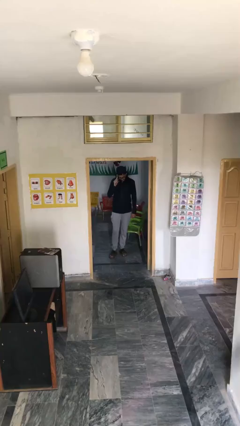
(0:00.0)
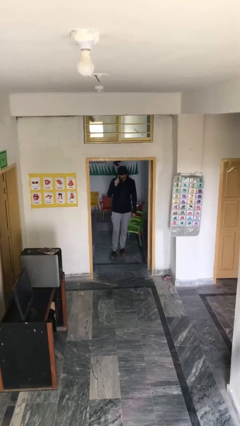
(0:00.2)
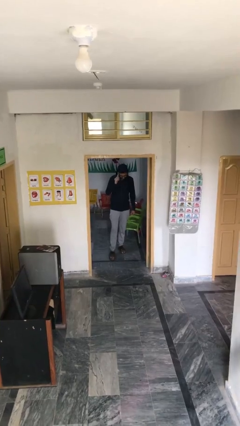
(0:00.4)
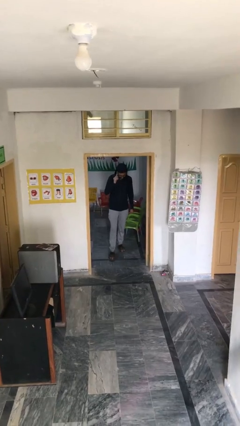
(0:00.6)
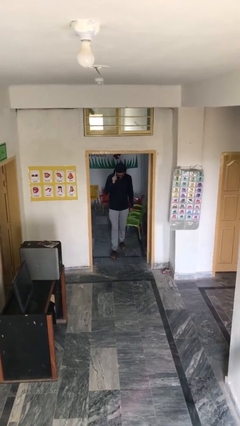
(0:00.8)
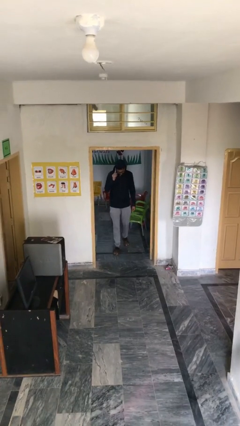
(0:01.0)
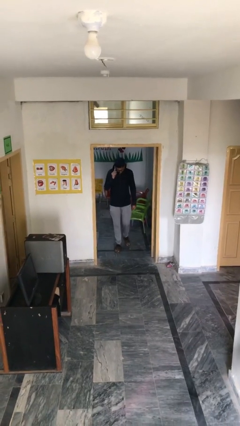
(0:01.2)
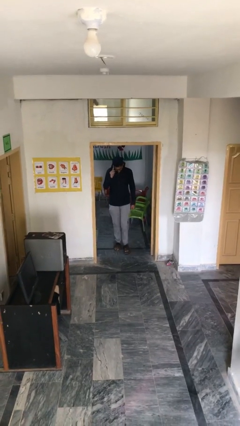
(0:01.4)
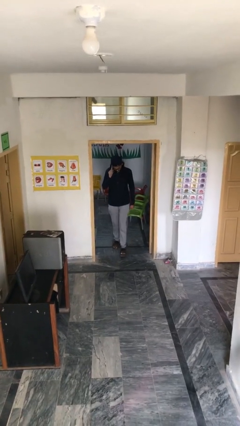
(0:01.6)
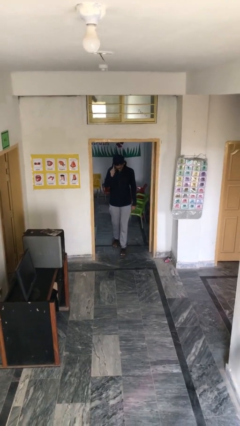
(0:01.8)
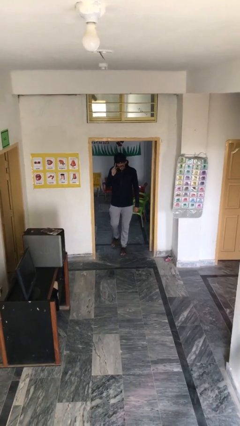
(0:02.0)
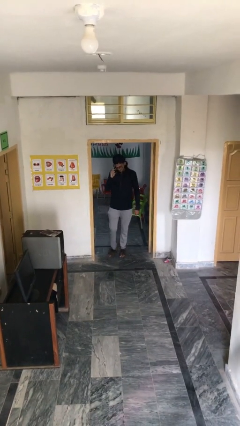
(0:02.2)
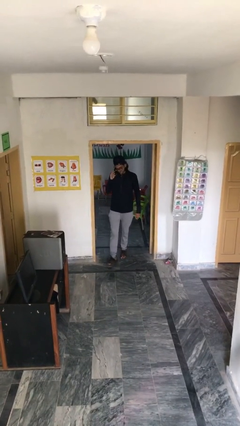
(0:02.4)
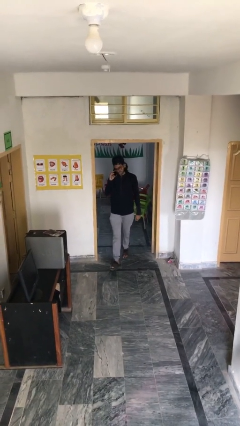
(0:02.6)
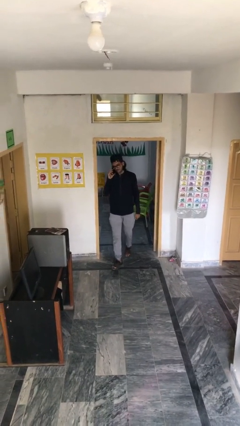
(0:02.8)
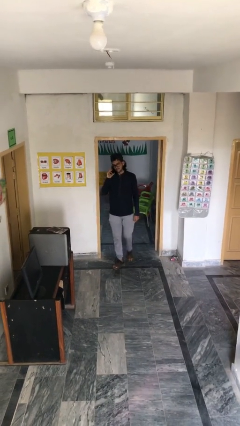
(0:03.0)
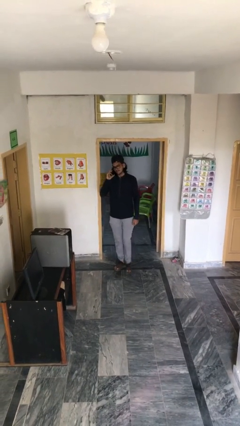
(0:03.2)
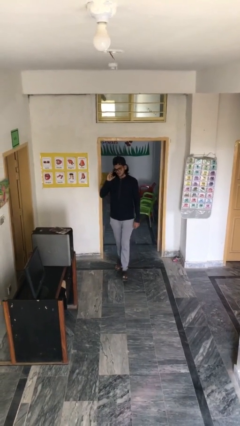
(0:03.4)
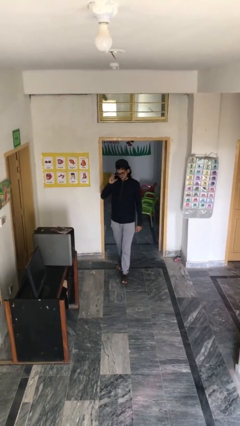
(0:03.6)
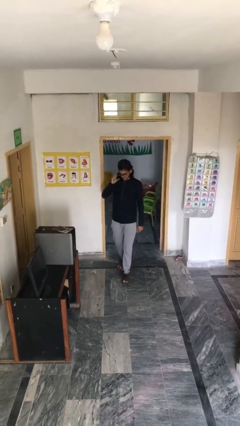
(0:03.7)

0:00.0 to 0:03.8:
person enters scene through structure

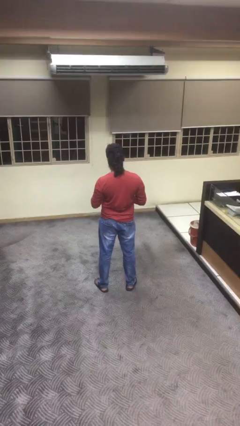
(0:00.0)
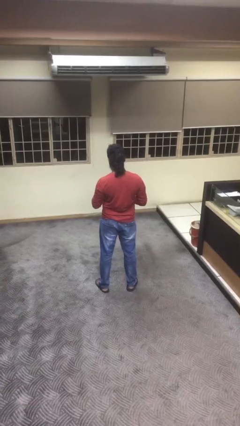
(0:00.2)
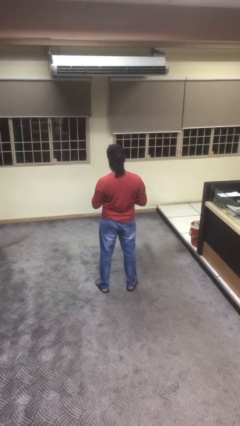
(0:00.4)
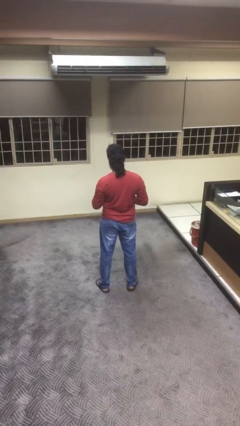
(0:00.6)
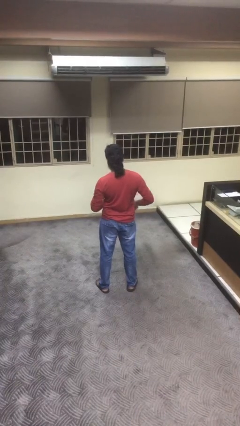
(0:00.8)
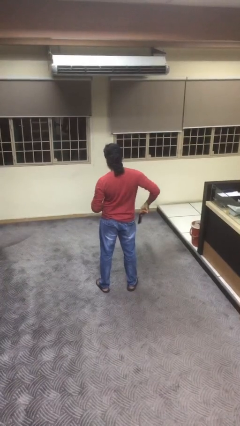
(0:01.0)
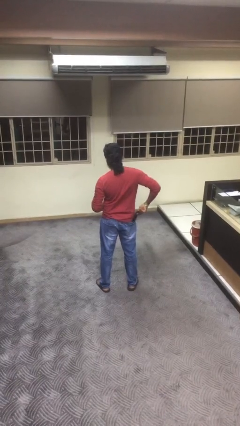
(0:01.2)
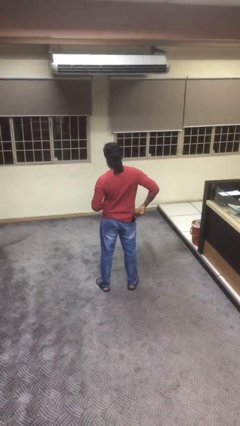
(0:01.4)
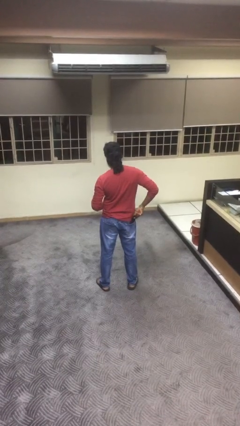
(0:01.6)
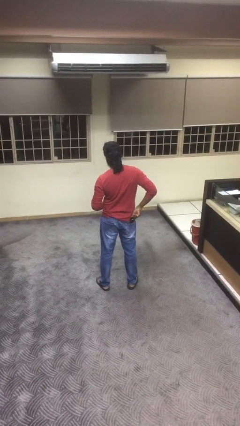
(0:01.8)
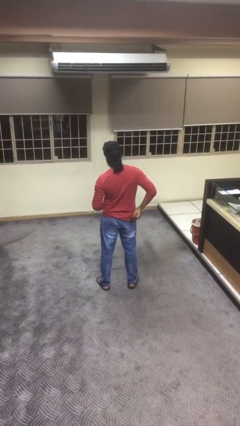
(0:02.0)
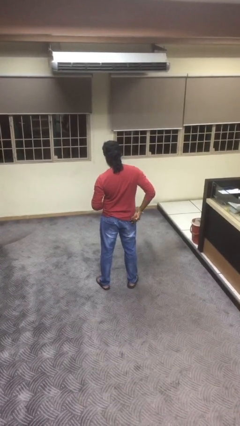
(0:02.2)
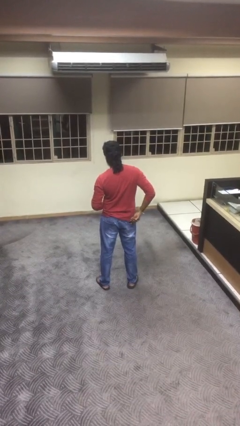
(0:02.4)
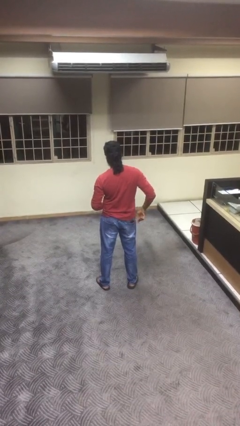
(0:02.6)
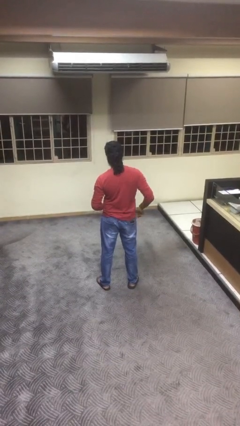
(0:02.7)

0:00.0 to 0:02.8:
person puts phone into pocket

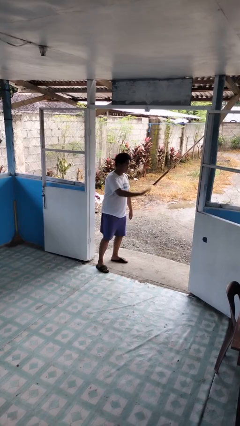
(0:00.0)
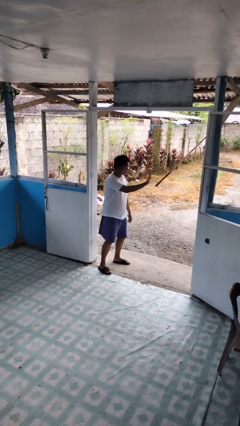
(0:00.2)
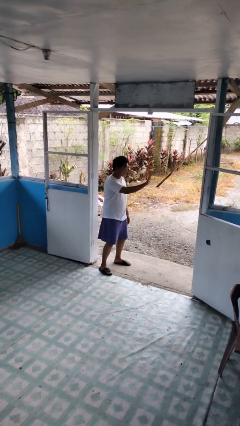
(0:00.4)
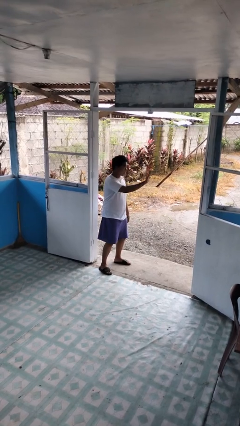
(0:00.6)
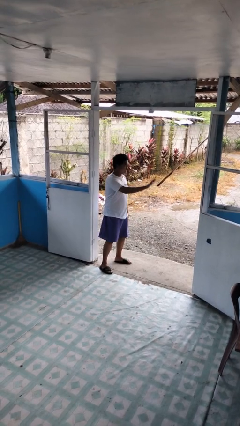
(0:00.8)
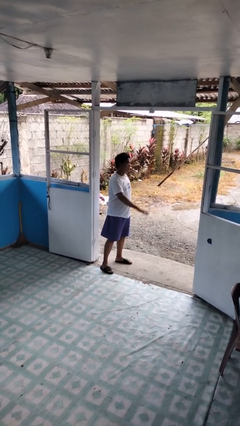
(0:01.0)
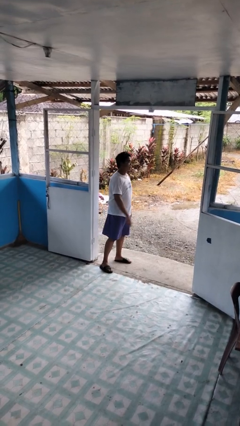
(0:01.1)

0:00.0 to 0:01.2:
person gestures stop

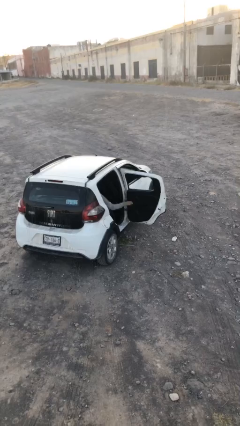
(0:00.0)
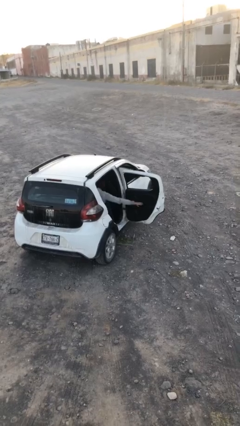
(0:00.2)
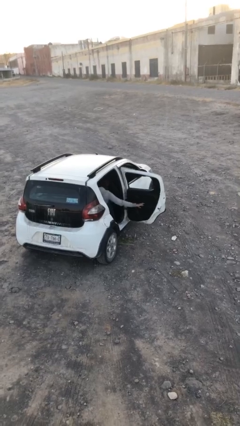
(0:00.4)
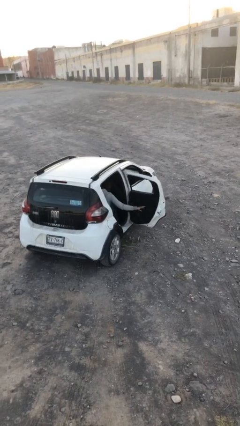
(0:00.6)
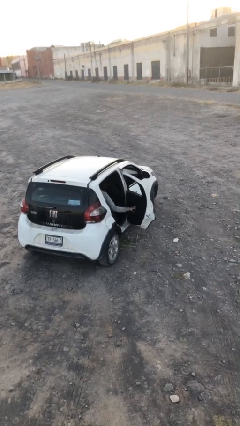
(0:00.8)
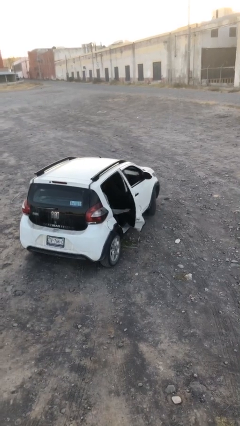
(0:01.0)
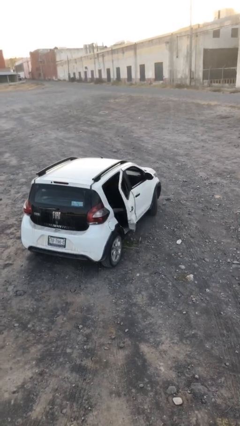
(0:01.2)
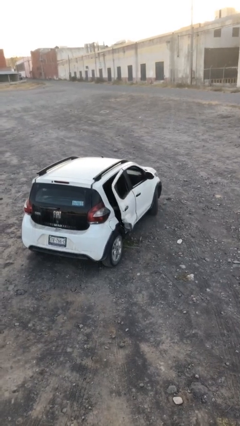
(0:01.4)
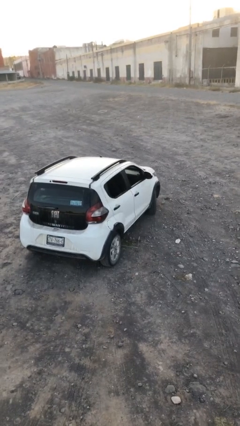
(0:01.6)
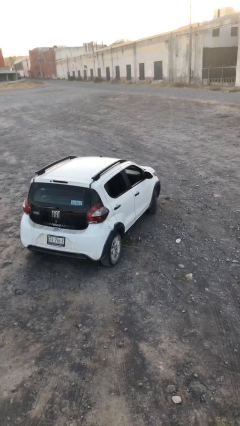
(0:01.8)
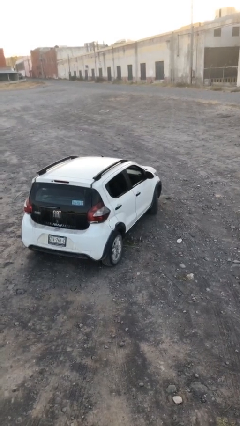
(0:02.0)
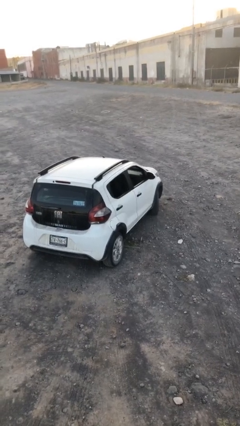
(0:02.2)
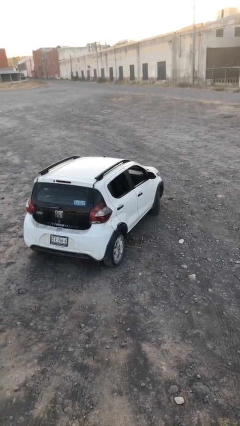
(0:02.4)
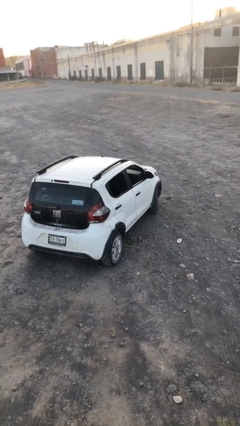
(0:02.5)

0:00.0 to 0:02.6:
person closes car door

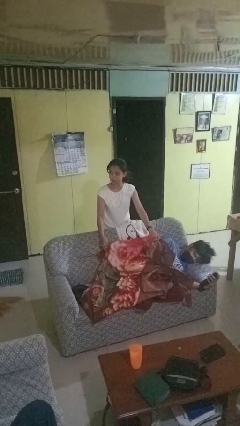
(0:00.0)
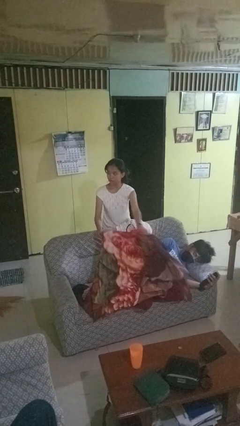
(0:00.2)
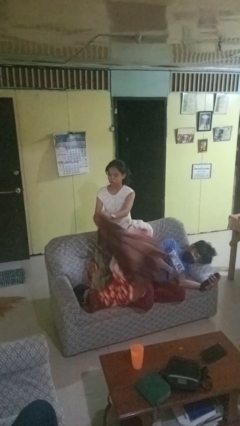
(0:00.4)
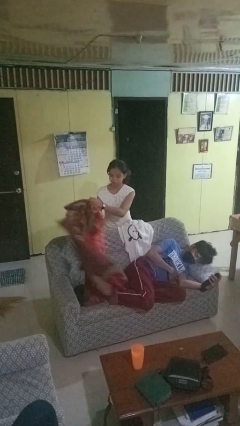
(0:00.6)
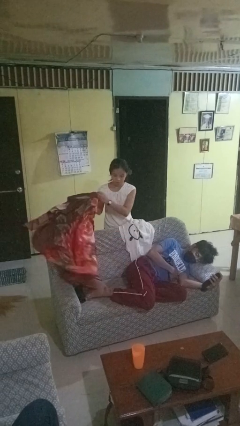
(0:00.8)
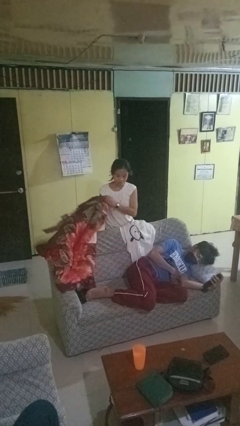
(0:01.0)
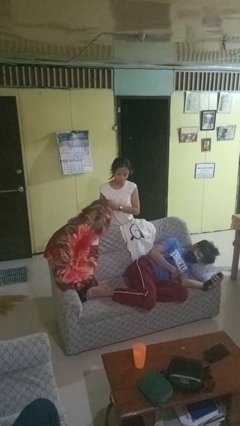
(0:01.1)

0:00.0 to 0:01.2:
person uncovers friend with blanket

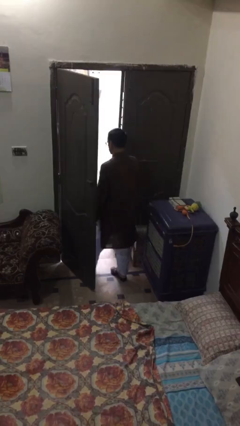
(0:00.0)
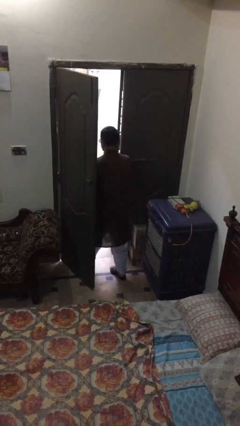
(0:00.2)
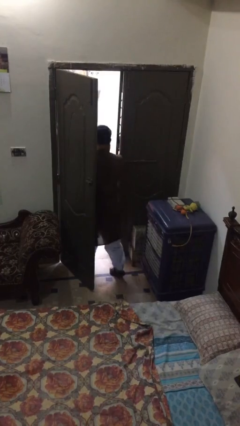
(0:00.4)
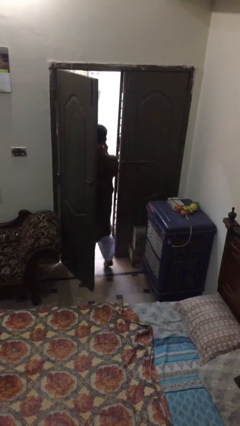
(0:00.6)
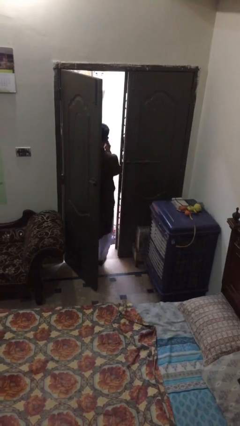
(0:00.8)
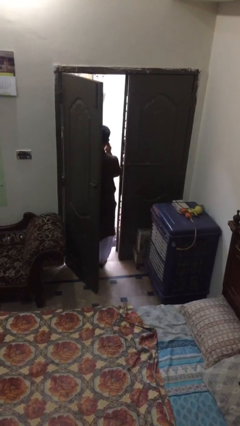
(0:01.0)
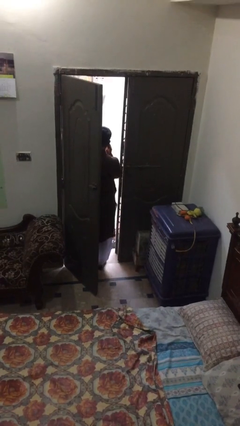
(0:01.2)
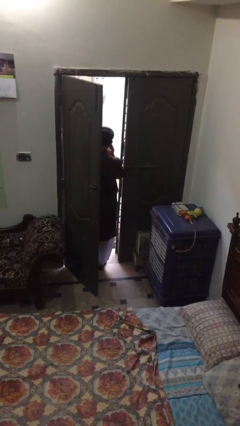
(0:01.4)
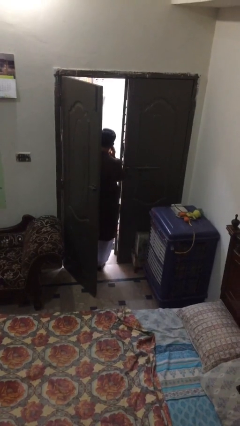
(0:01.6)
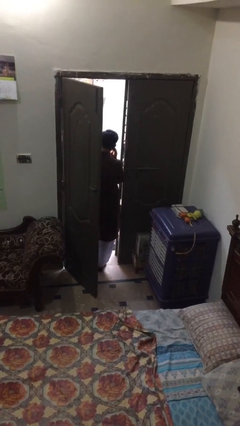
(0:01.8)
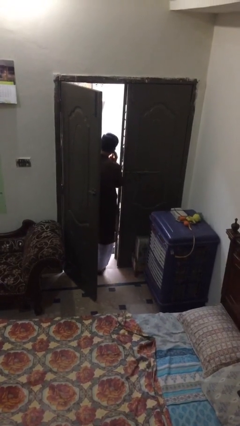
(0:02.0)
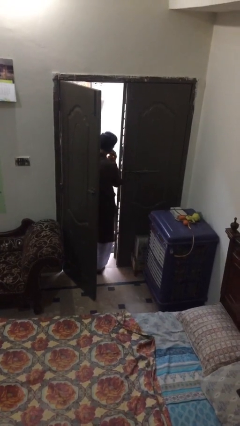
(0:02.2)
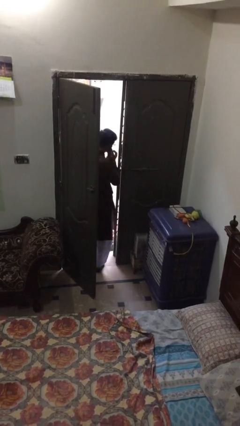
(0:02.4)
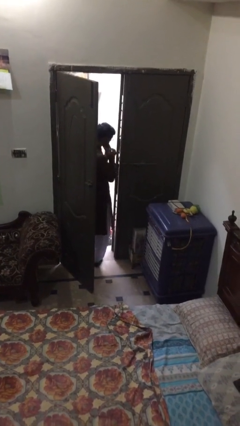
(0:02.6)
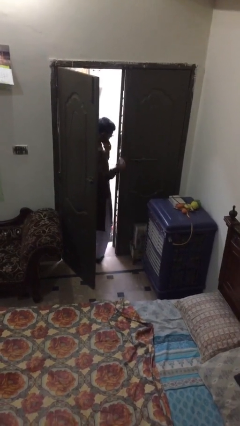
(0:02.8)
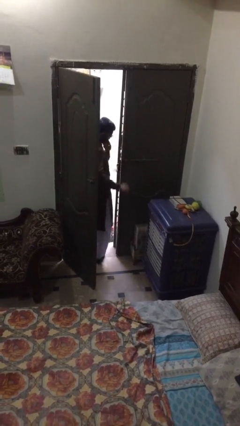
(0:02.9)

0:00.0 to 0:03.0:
person exits scene through structure

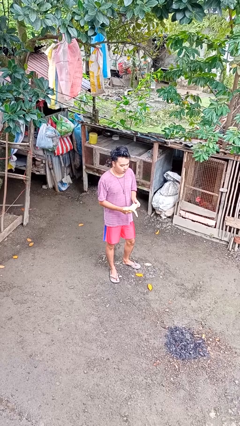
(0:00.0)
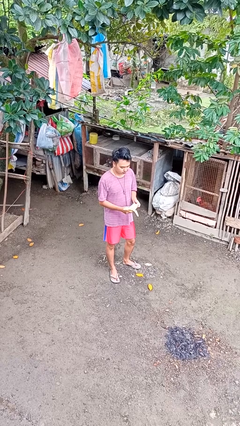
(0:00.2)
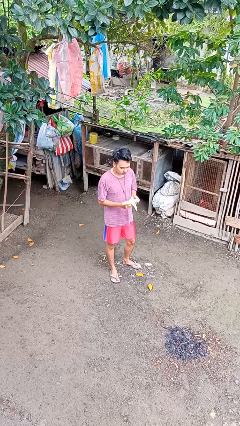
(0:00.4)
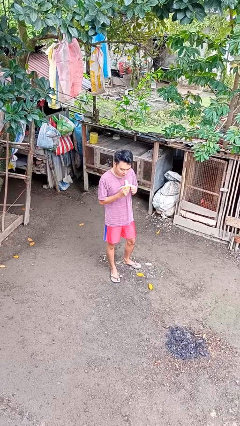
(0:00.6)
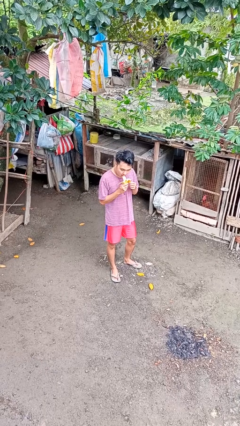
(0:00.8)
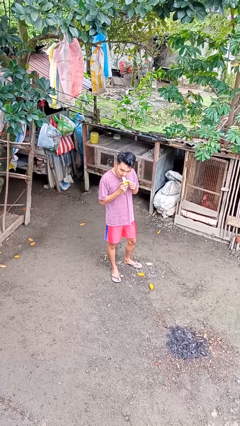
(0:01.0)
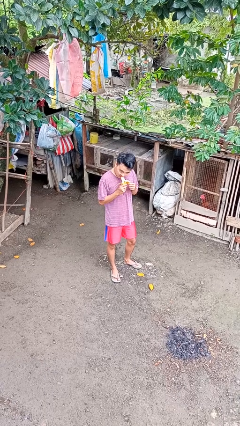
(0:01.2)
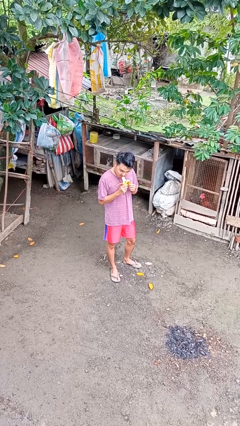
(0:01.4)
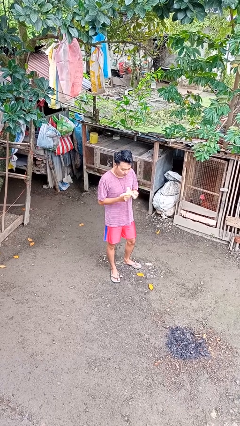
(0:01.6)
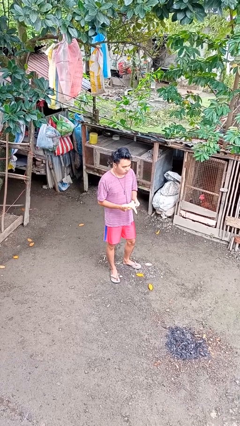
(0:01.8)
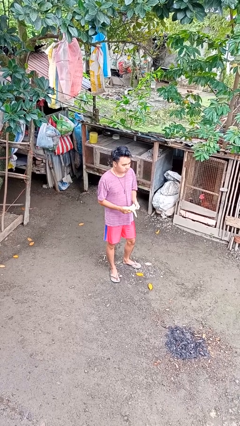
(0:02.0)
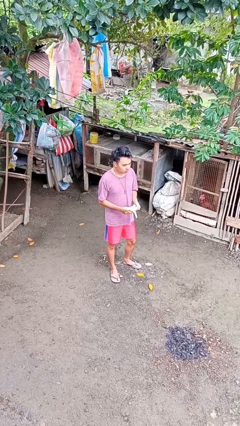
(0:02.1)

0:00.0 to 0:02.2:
person eats banana
